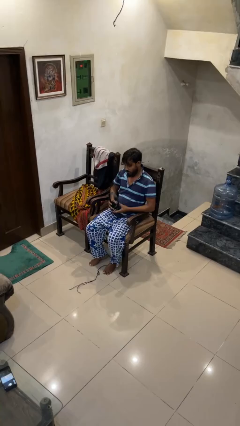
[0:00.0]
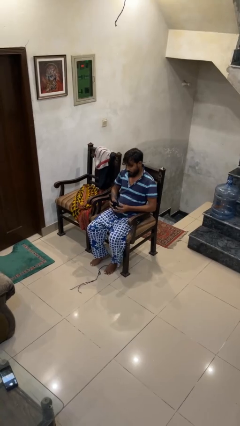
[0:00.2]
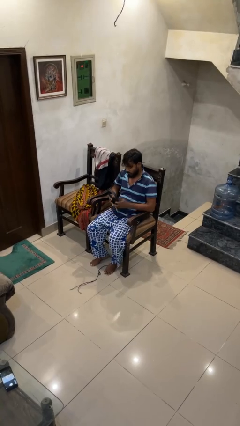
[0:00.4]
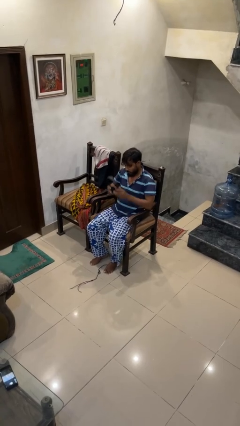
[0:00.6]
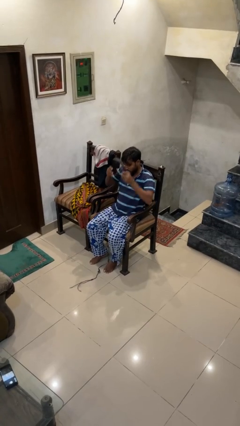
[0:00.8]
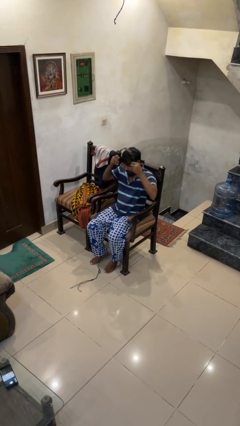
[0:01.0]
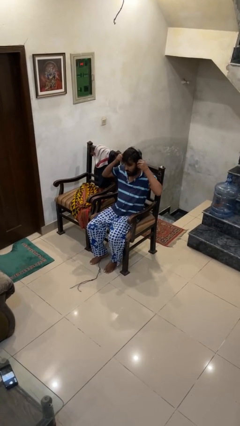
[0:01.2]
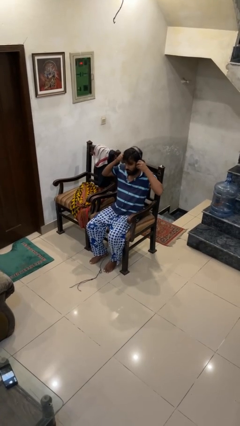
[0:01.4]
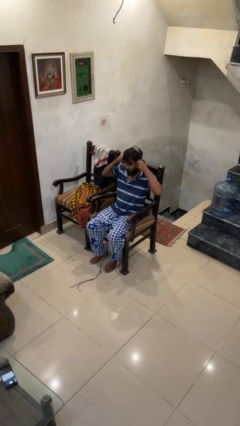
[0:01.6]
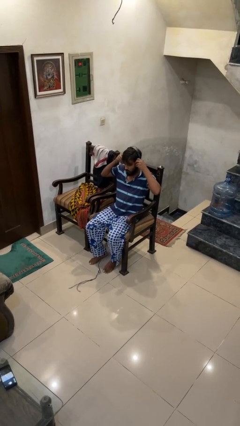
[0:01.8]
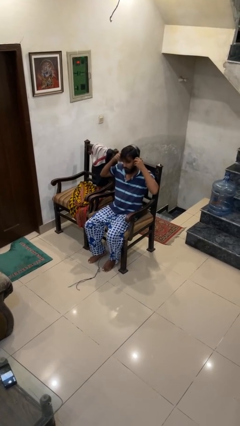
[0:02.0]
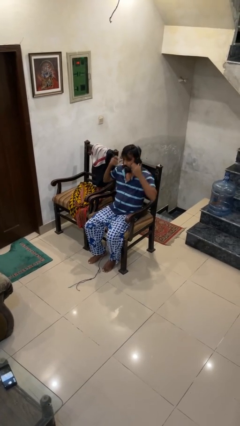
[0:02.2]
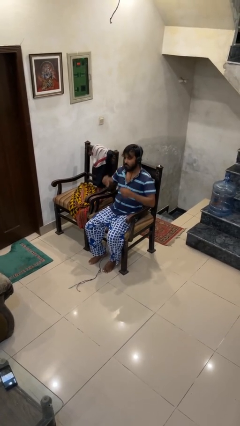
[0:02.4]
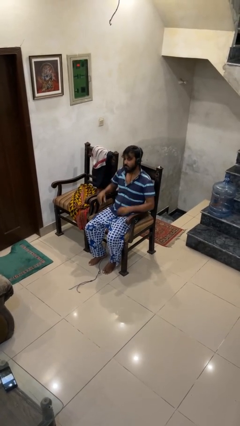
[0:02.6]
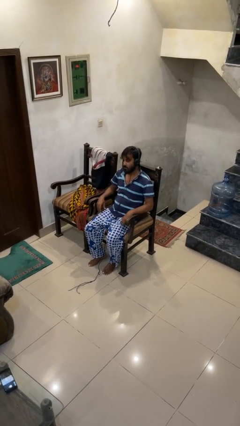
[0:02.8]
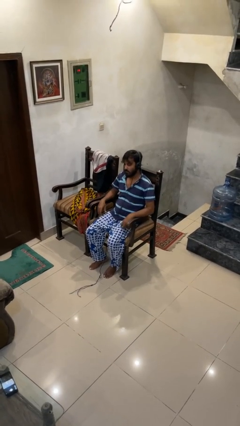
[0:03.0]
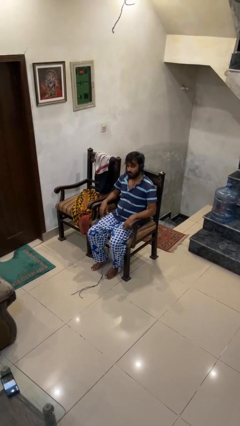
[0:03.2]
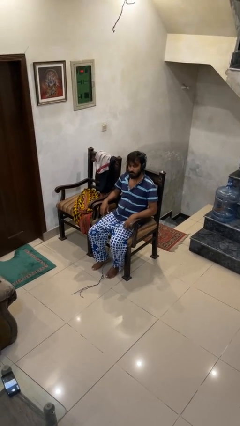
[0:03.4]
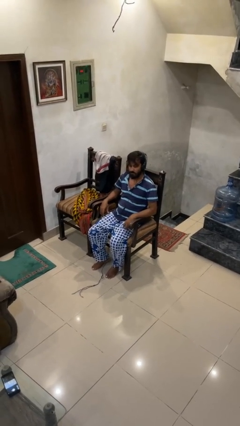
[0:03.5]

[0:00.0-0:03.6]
person puts on headphones

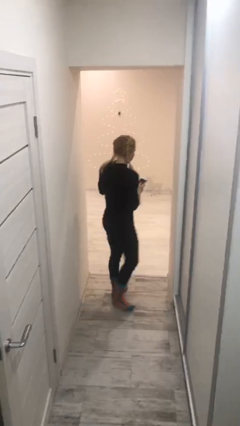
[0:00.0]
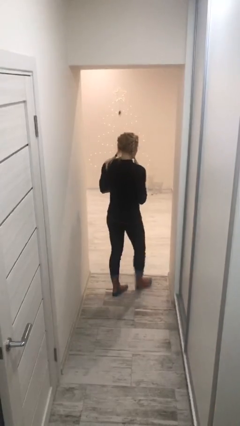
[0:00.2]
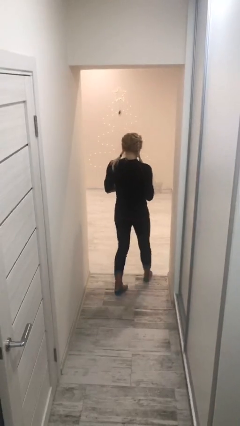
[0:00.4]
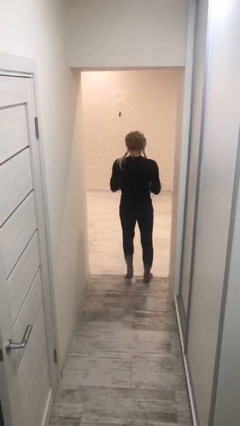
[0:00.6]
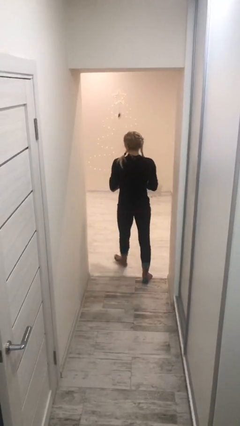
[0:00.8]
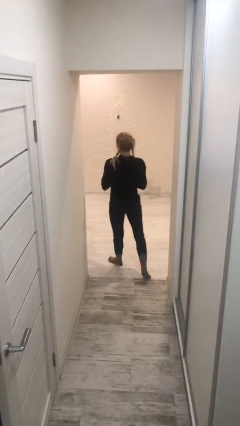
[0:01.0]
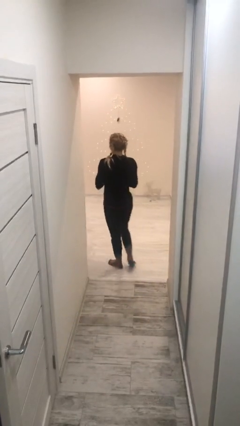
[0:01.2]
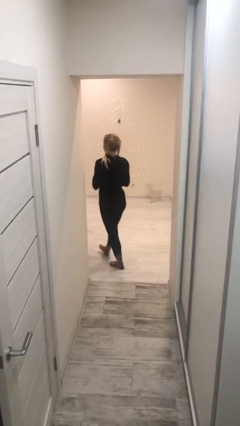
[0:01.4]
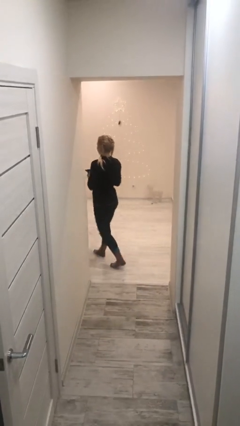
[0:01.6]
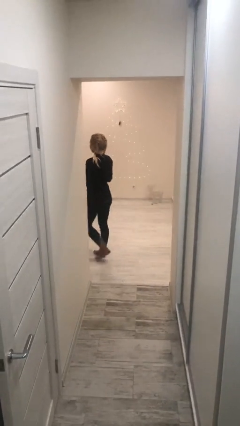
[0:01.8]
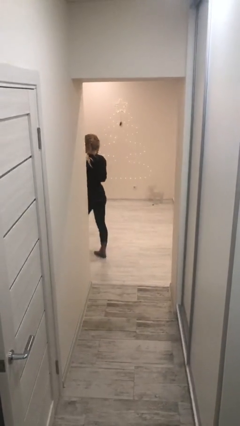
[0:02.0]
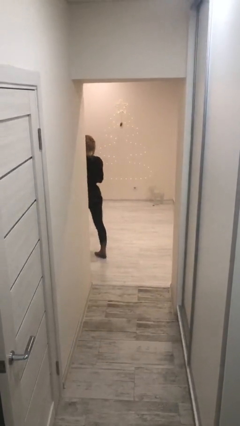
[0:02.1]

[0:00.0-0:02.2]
person exits scene through structure

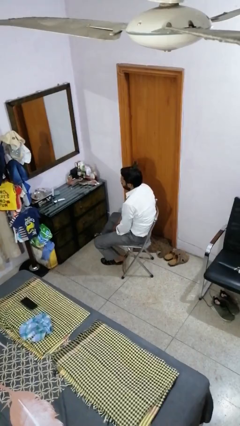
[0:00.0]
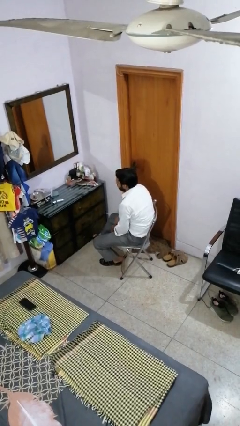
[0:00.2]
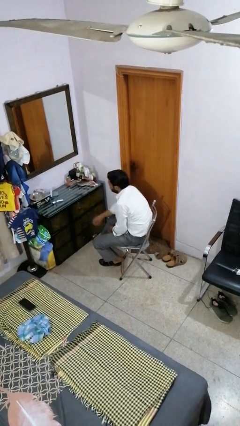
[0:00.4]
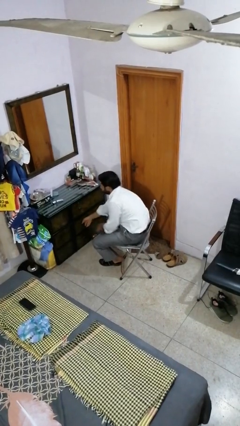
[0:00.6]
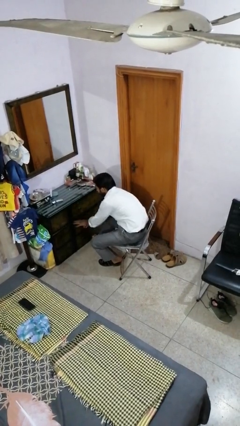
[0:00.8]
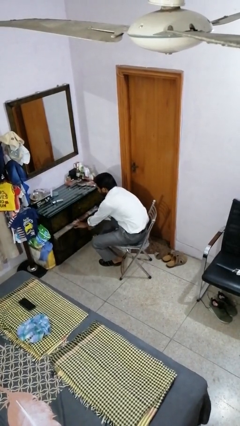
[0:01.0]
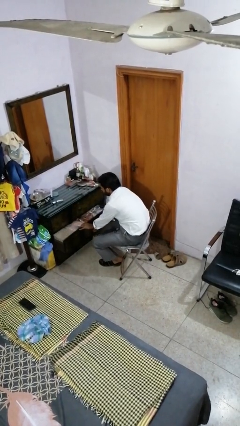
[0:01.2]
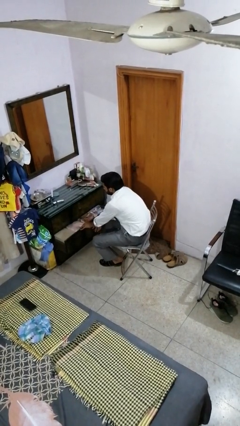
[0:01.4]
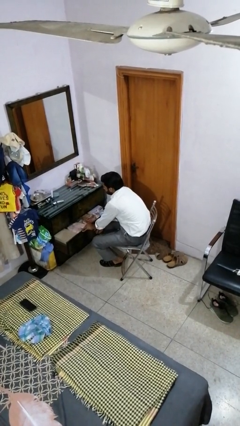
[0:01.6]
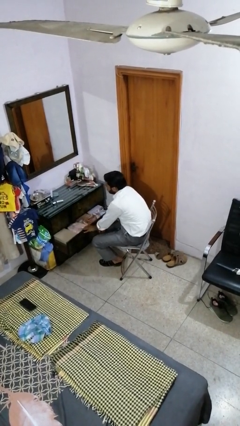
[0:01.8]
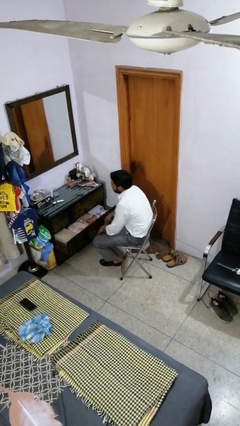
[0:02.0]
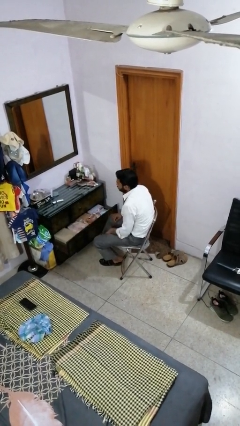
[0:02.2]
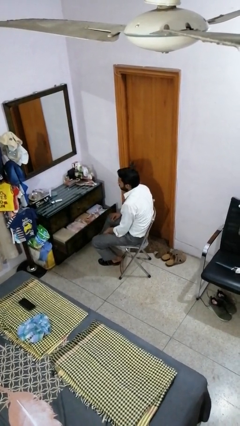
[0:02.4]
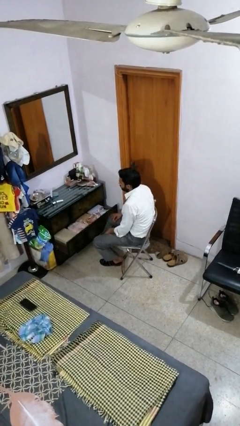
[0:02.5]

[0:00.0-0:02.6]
person opens dresser drawer

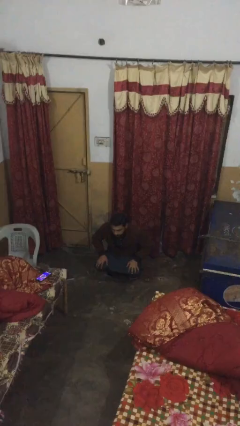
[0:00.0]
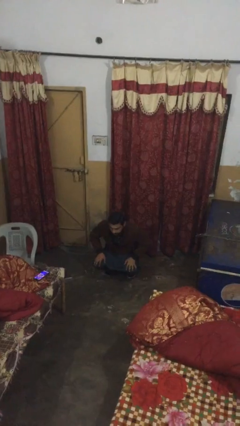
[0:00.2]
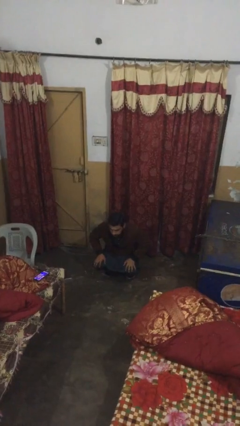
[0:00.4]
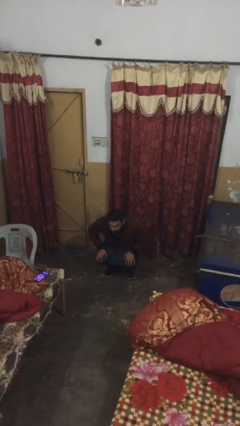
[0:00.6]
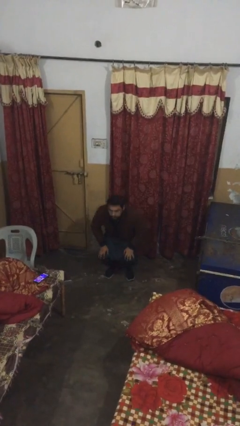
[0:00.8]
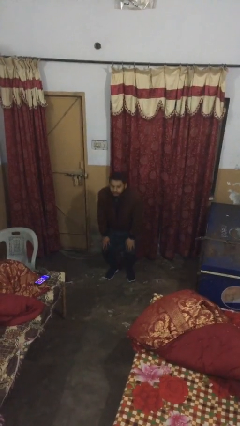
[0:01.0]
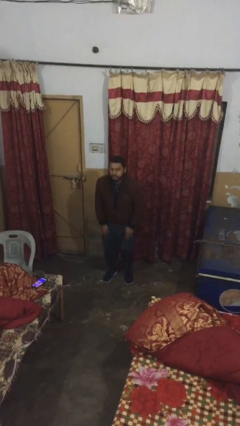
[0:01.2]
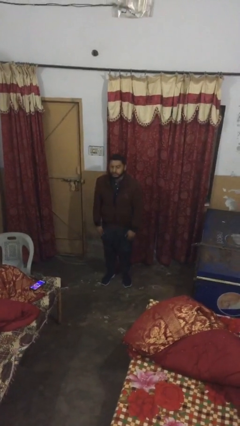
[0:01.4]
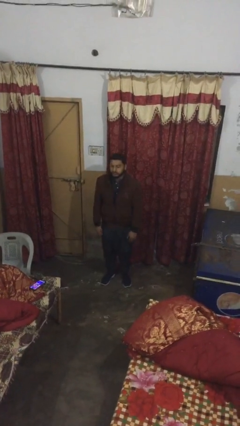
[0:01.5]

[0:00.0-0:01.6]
person stands up

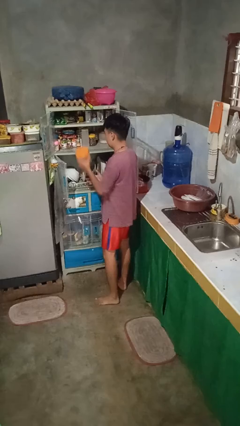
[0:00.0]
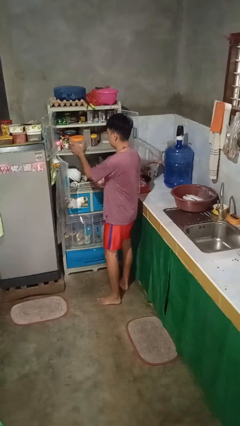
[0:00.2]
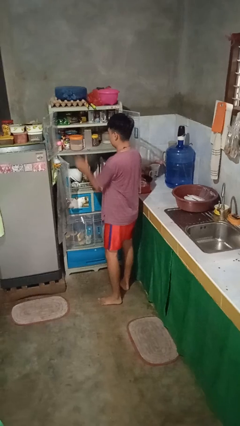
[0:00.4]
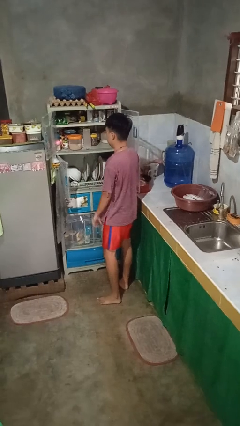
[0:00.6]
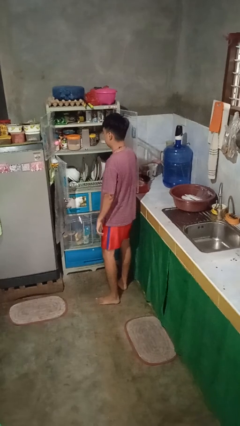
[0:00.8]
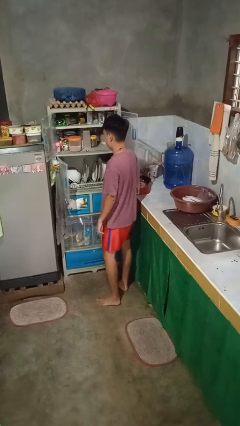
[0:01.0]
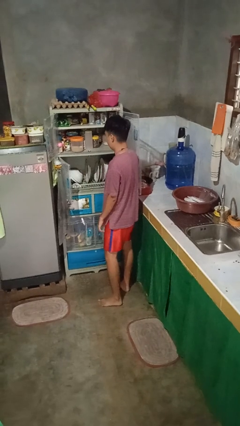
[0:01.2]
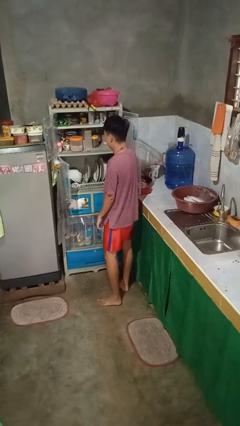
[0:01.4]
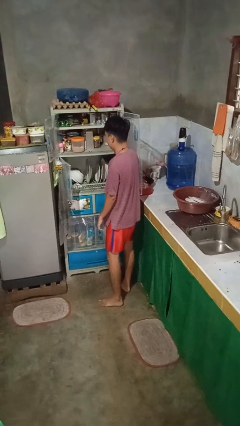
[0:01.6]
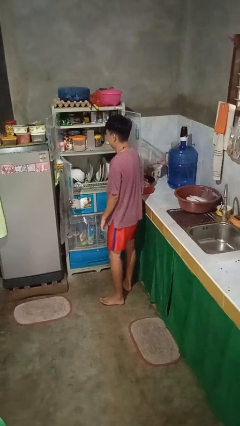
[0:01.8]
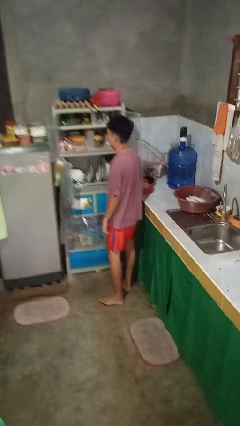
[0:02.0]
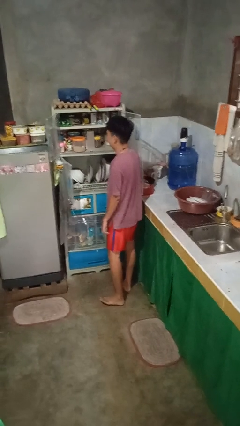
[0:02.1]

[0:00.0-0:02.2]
person puts object in cabinet

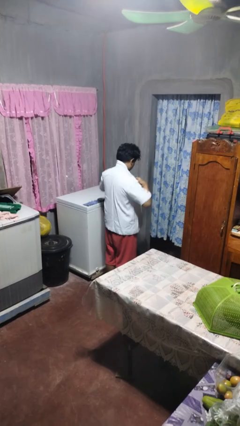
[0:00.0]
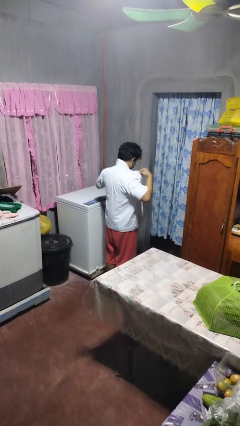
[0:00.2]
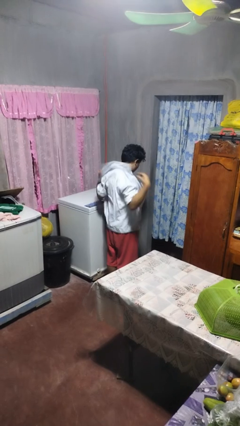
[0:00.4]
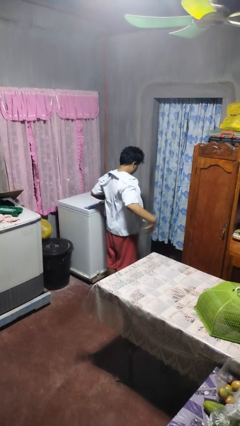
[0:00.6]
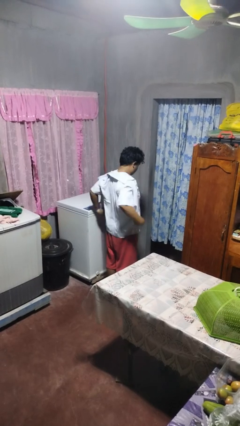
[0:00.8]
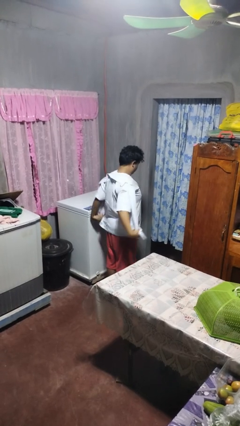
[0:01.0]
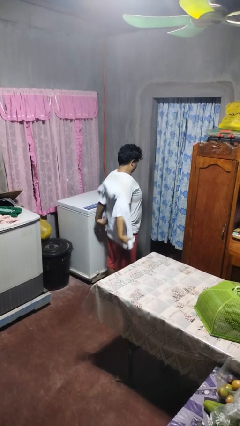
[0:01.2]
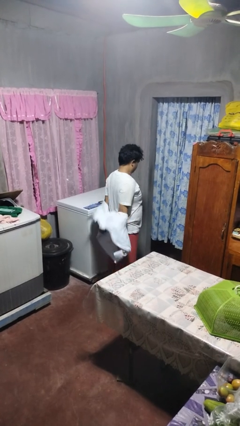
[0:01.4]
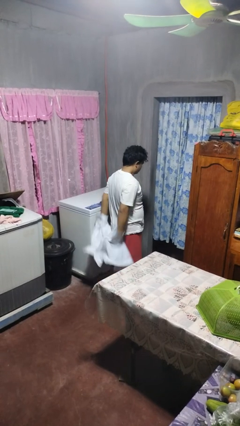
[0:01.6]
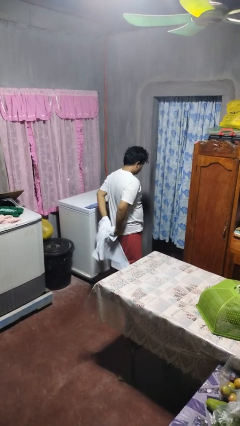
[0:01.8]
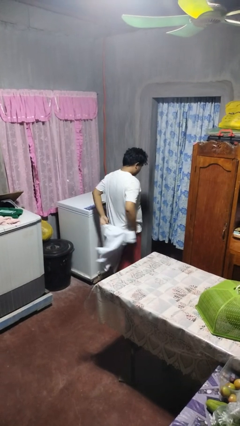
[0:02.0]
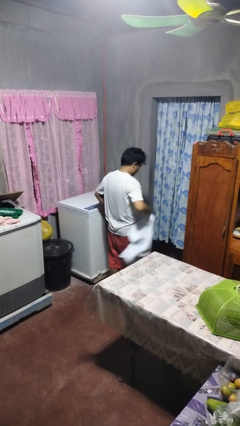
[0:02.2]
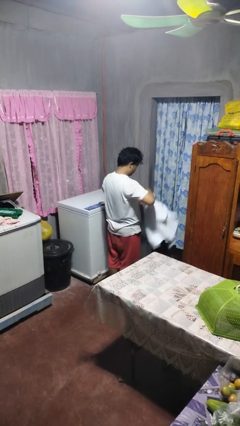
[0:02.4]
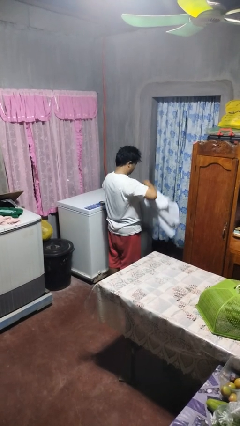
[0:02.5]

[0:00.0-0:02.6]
person takes off shirt

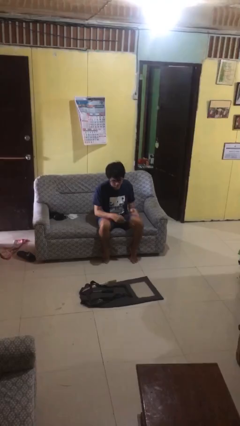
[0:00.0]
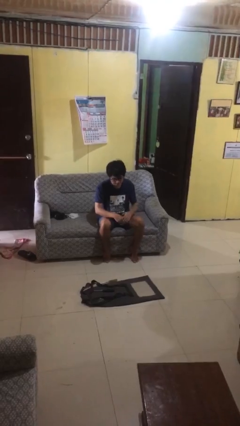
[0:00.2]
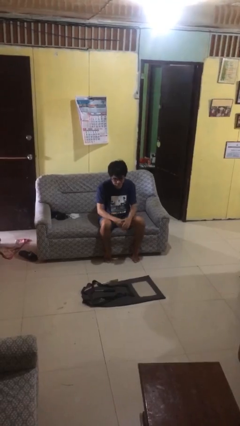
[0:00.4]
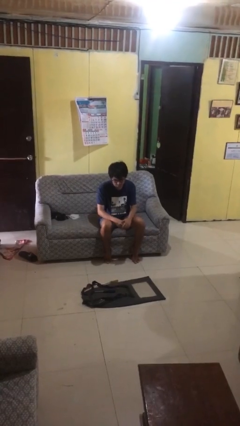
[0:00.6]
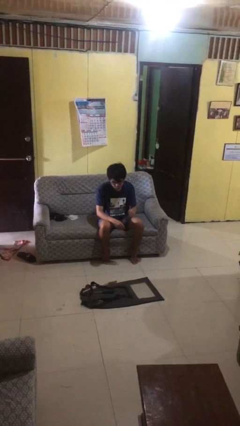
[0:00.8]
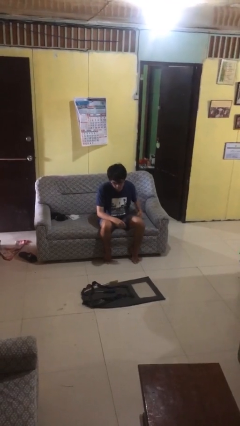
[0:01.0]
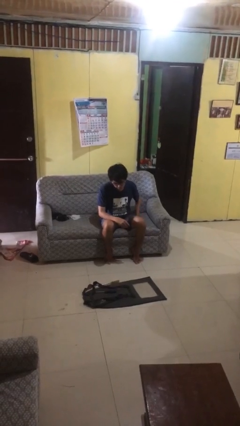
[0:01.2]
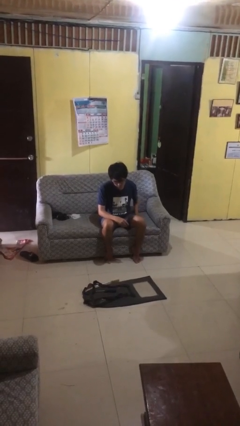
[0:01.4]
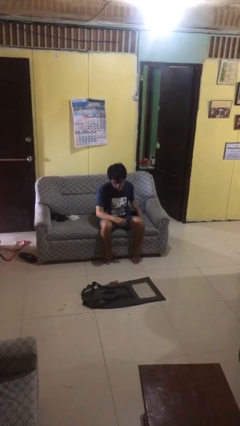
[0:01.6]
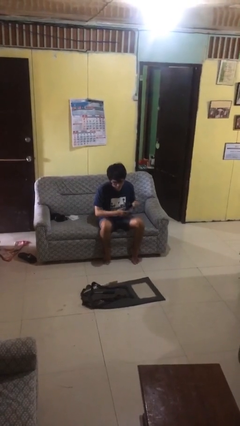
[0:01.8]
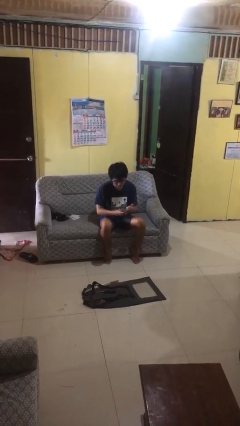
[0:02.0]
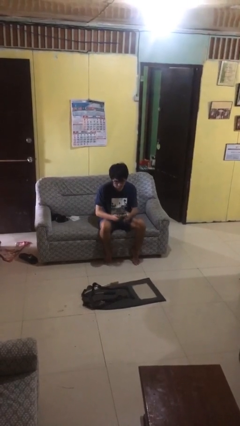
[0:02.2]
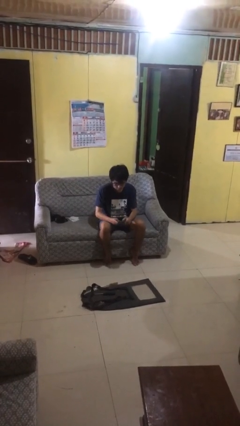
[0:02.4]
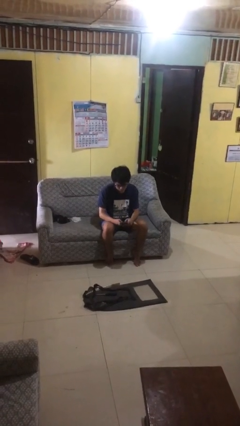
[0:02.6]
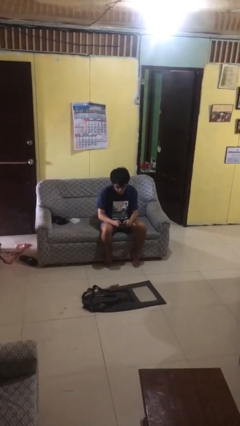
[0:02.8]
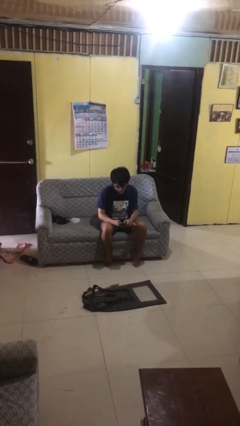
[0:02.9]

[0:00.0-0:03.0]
person takes phone from pocket
